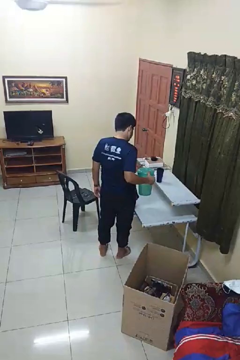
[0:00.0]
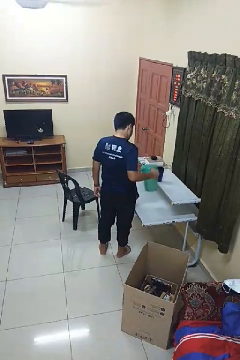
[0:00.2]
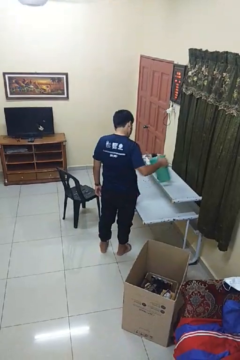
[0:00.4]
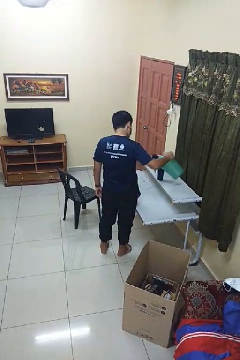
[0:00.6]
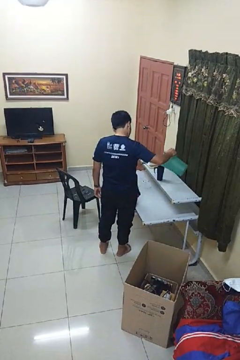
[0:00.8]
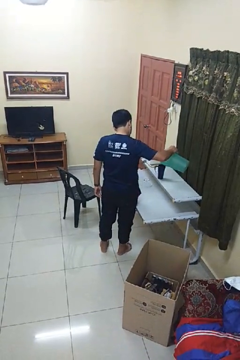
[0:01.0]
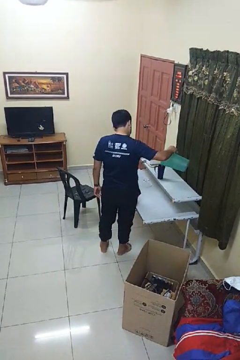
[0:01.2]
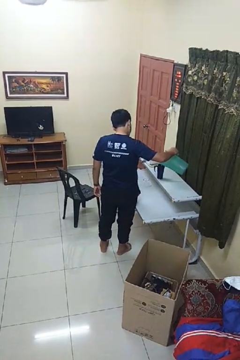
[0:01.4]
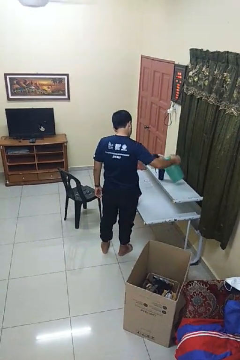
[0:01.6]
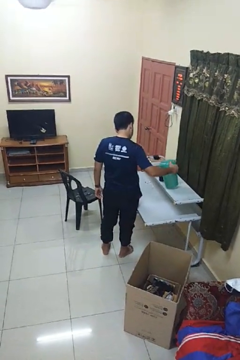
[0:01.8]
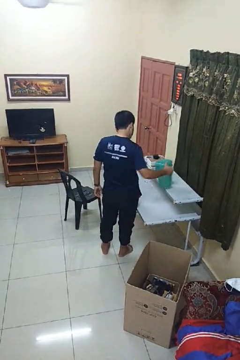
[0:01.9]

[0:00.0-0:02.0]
person pours coffee into mug

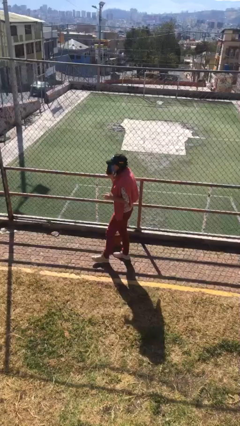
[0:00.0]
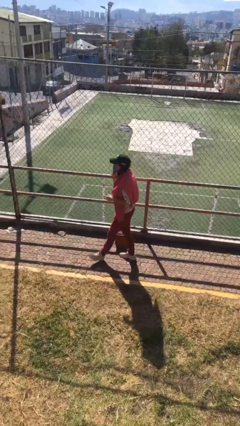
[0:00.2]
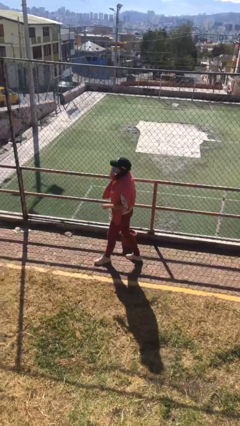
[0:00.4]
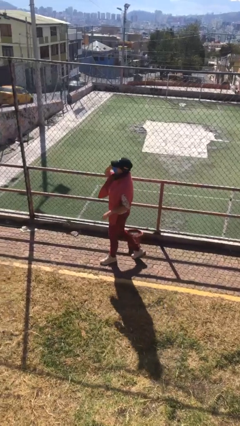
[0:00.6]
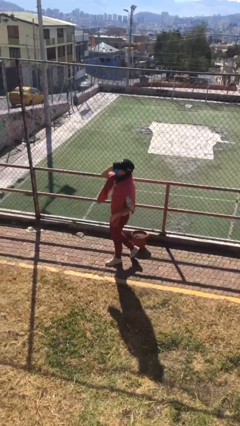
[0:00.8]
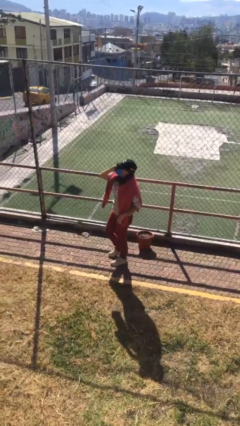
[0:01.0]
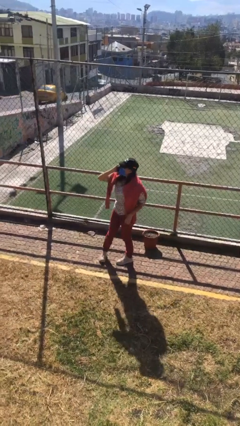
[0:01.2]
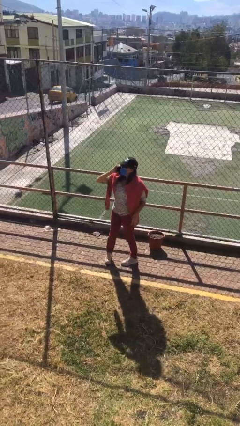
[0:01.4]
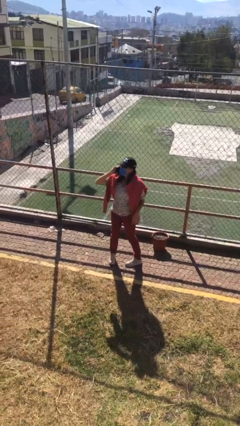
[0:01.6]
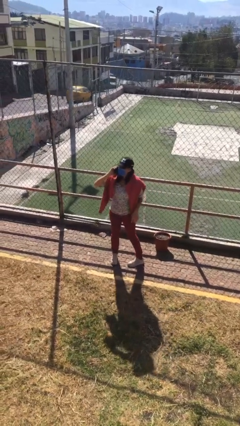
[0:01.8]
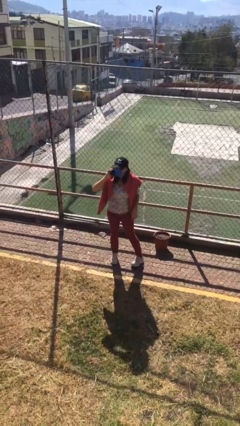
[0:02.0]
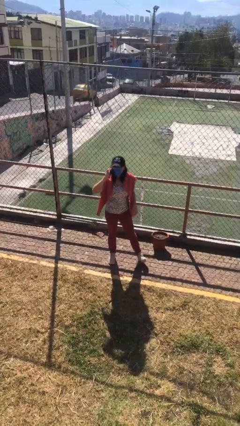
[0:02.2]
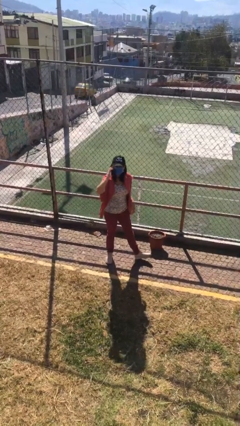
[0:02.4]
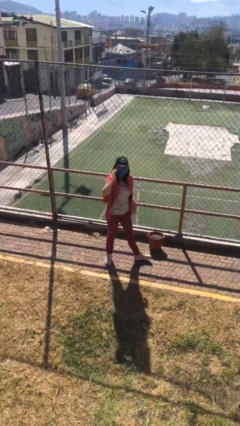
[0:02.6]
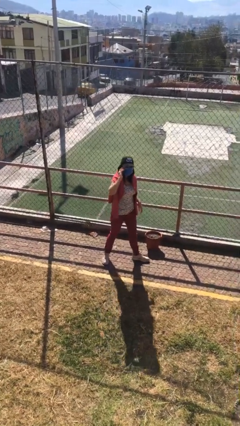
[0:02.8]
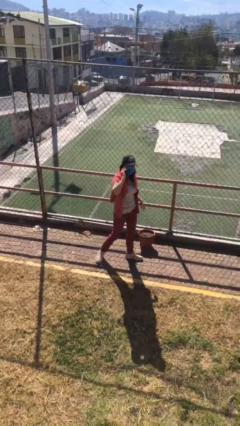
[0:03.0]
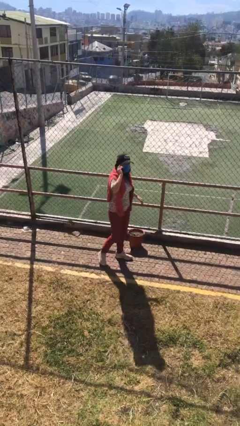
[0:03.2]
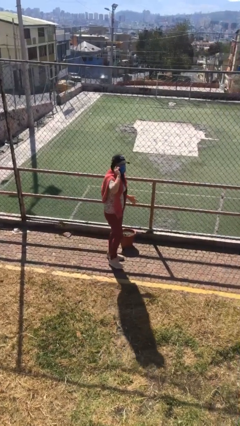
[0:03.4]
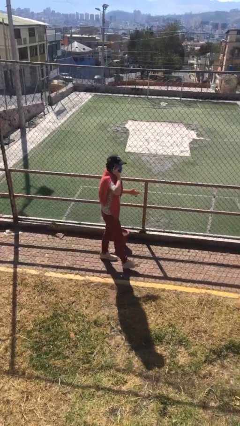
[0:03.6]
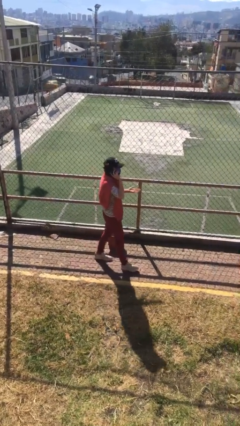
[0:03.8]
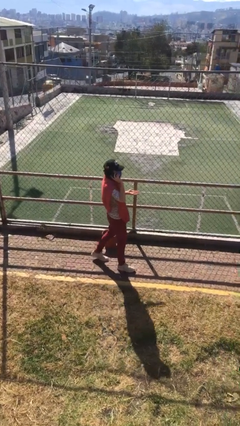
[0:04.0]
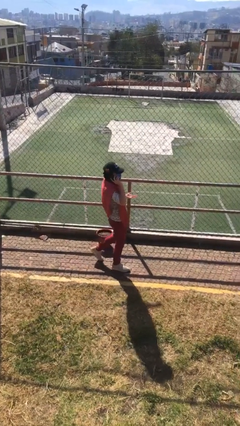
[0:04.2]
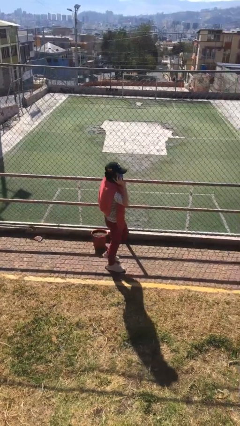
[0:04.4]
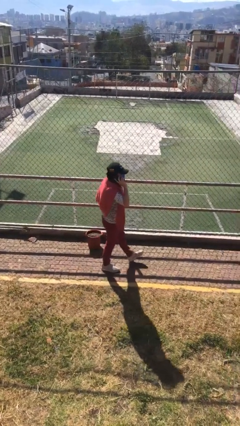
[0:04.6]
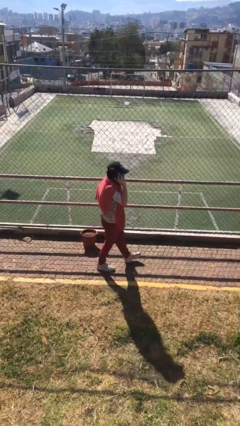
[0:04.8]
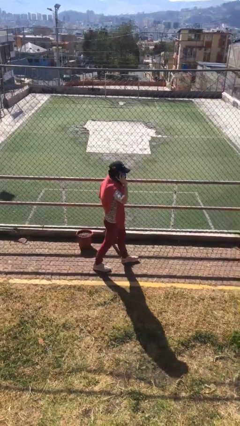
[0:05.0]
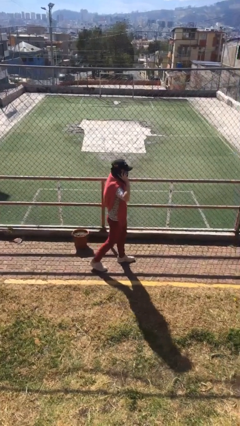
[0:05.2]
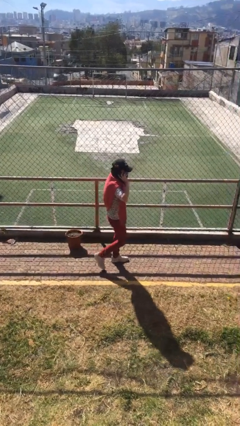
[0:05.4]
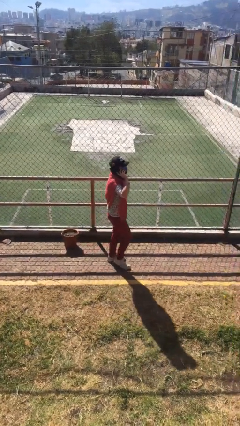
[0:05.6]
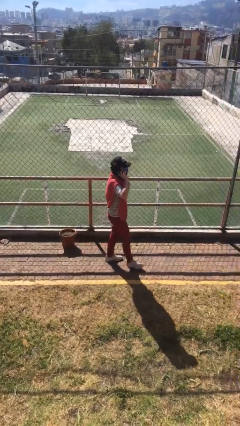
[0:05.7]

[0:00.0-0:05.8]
person talks on phone

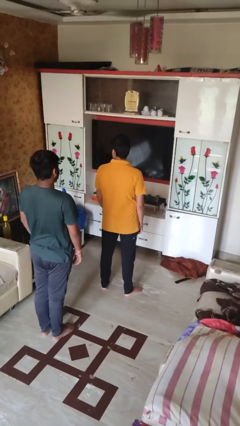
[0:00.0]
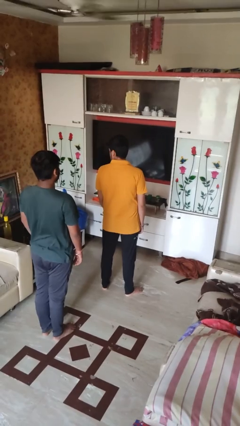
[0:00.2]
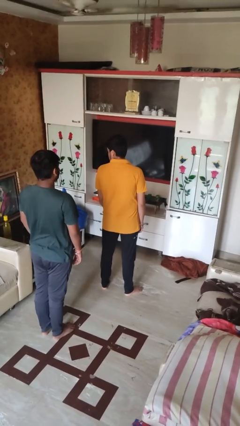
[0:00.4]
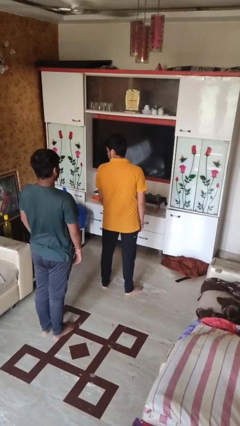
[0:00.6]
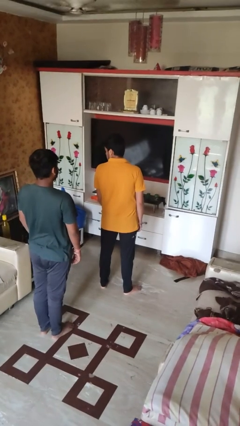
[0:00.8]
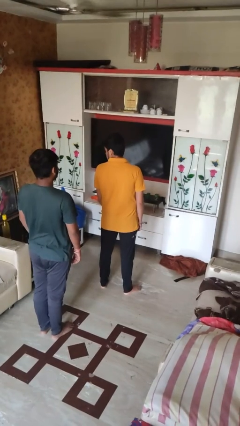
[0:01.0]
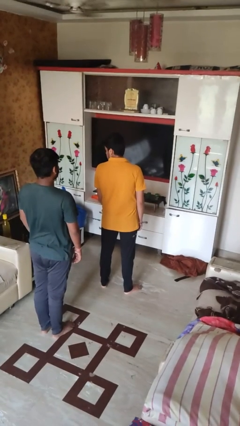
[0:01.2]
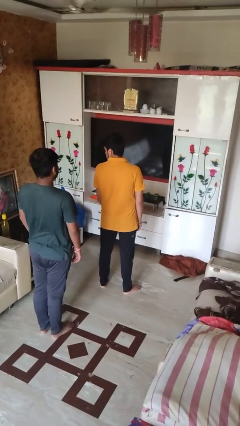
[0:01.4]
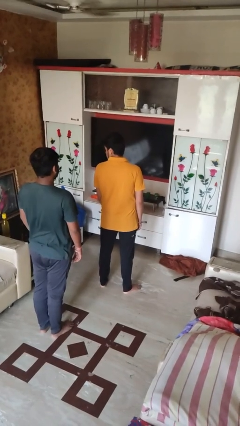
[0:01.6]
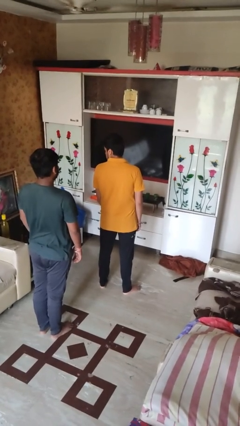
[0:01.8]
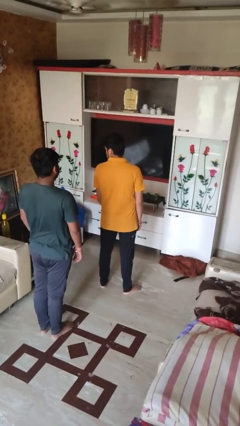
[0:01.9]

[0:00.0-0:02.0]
person looks over shoulder

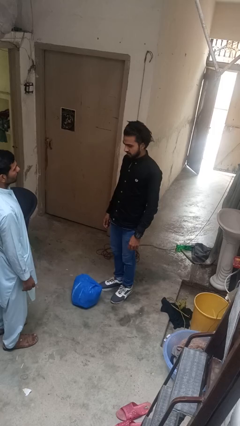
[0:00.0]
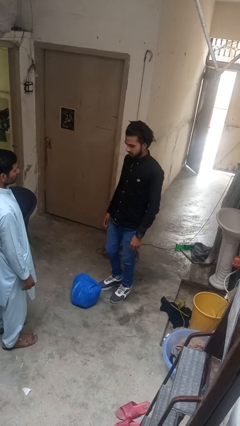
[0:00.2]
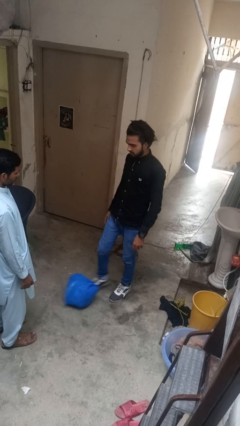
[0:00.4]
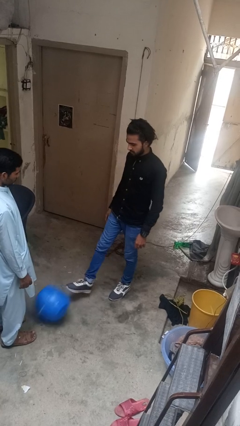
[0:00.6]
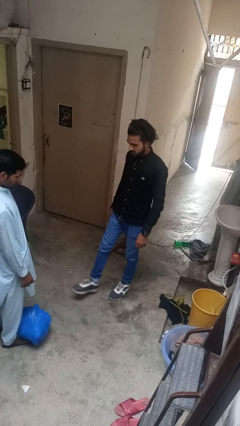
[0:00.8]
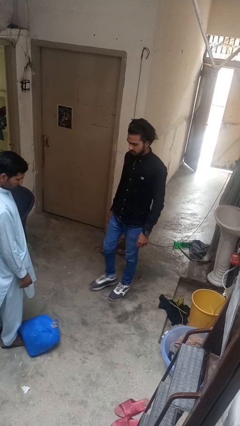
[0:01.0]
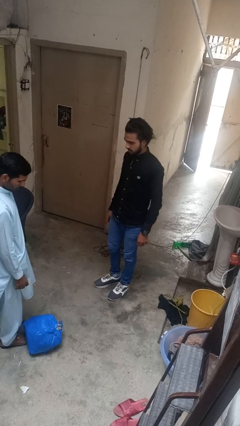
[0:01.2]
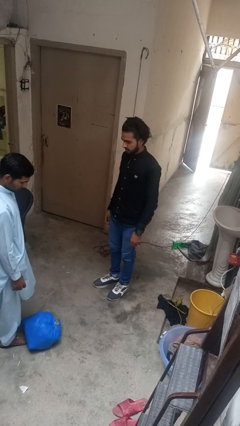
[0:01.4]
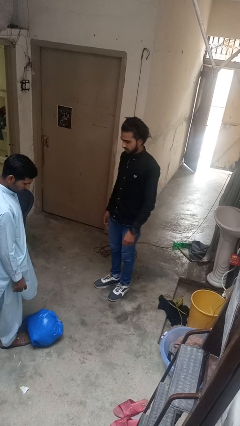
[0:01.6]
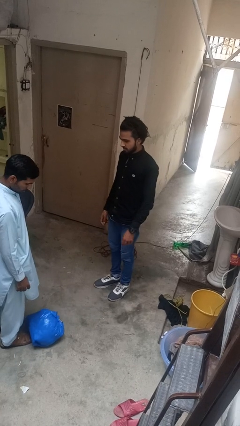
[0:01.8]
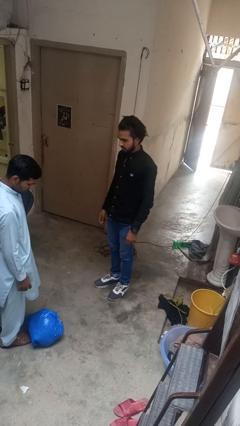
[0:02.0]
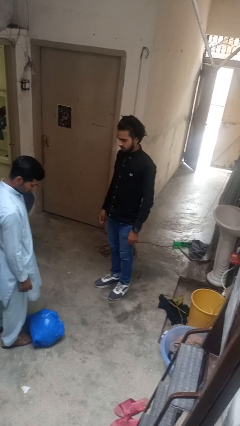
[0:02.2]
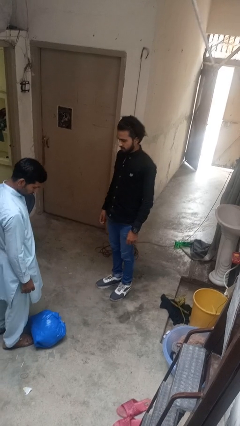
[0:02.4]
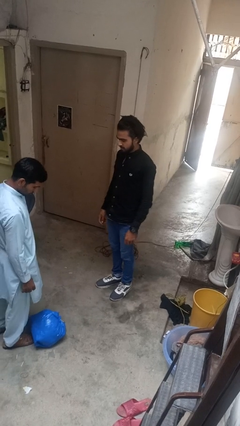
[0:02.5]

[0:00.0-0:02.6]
person kicks object to person

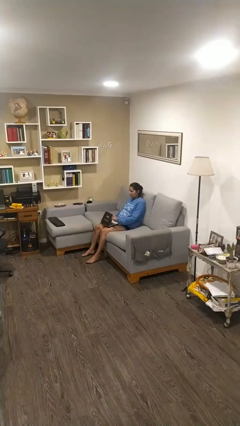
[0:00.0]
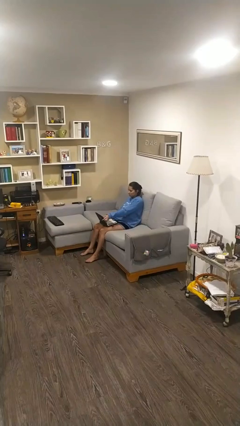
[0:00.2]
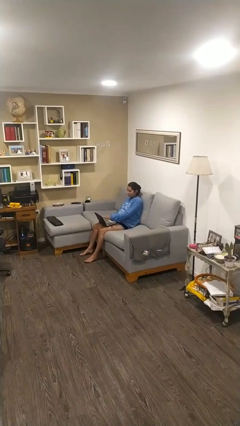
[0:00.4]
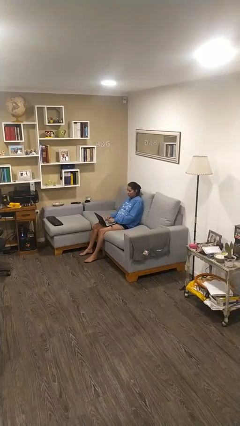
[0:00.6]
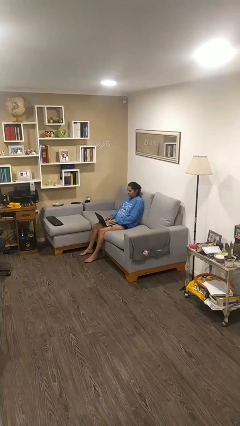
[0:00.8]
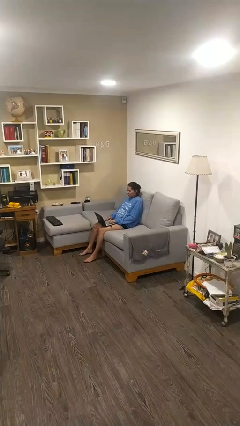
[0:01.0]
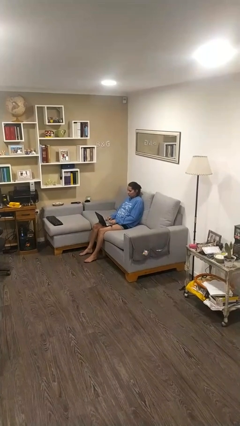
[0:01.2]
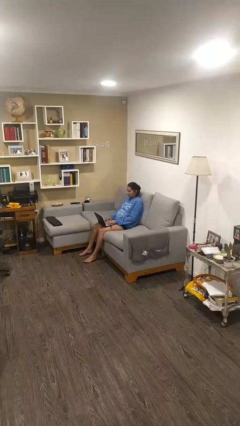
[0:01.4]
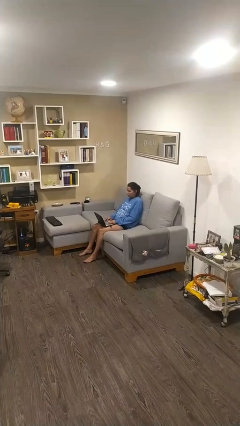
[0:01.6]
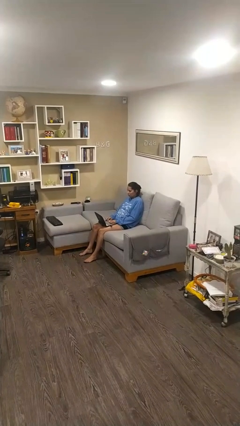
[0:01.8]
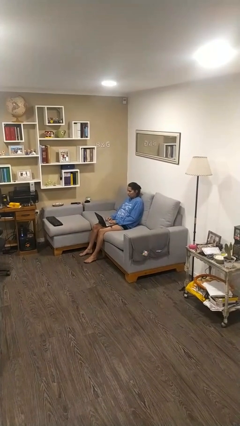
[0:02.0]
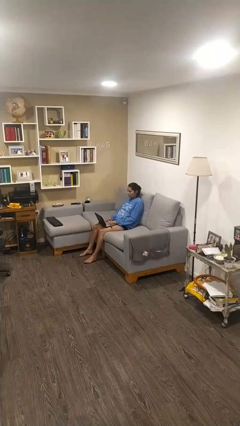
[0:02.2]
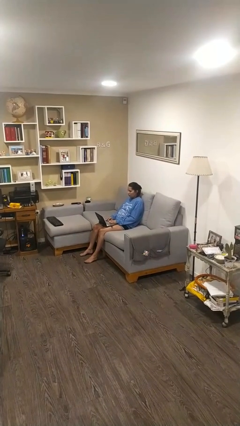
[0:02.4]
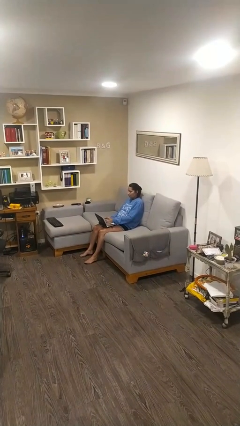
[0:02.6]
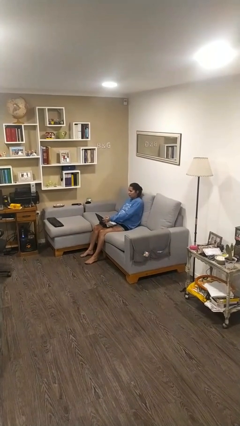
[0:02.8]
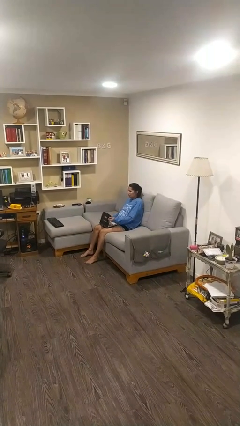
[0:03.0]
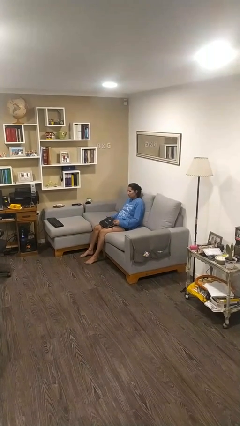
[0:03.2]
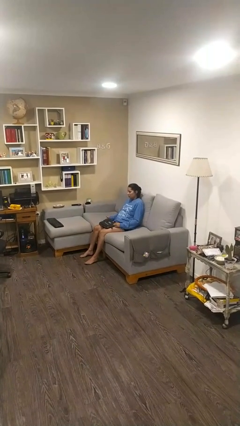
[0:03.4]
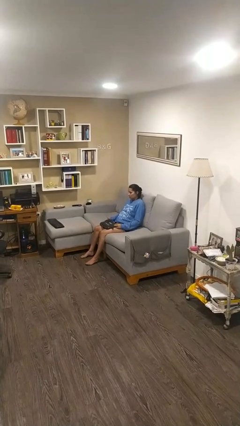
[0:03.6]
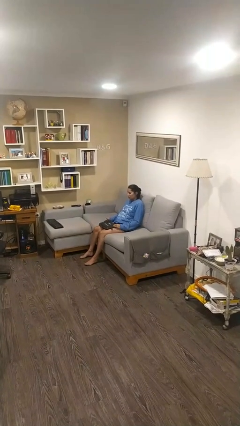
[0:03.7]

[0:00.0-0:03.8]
person interacts with laptop

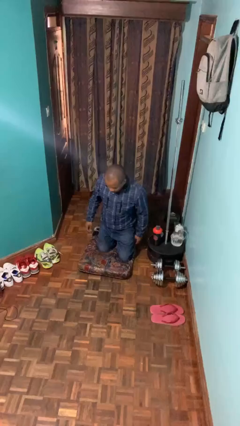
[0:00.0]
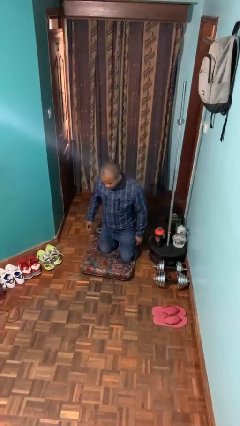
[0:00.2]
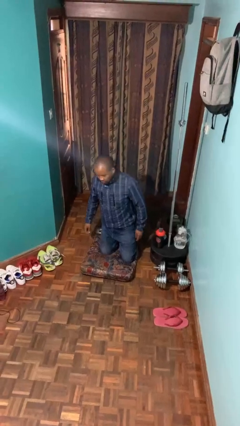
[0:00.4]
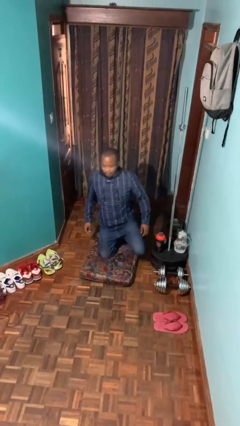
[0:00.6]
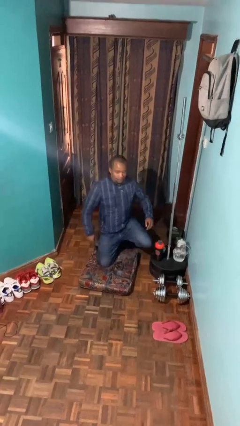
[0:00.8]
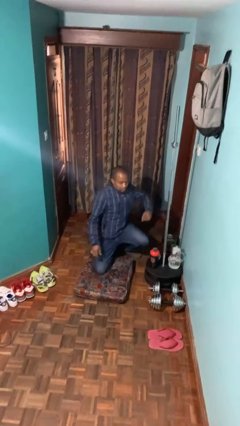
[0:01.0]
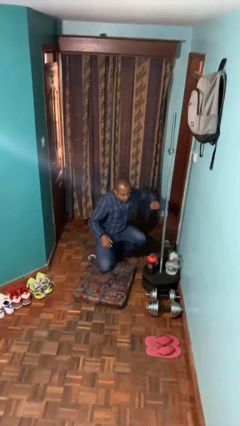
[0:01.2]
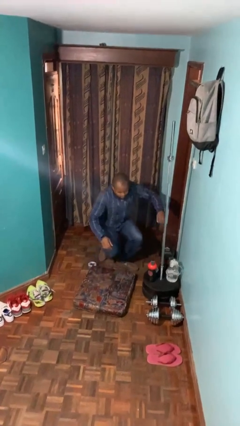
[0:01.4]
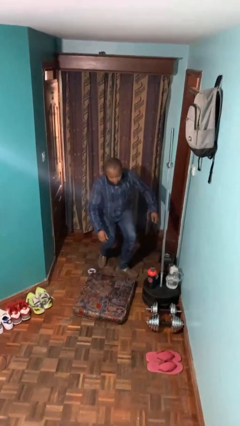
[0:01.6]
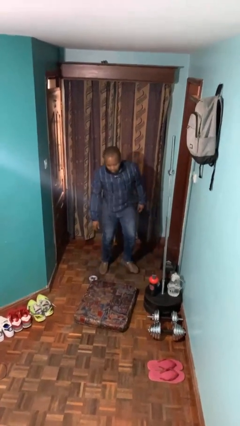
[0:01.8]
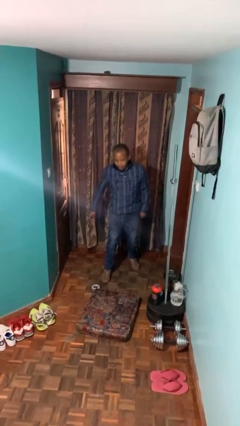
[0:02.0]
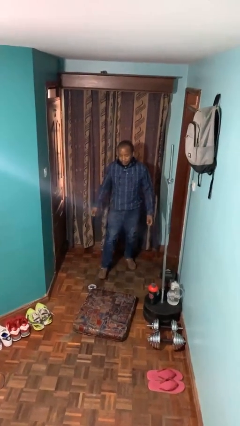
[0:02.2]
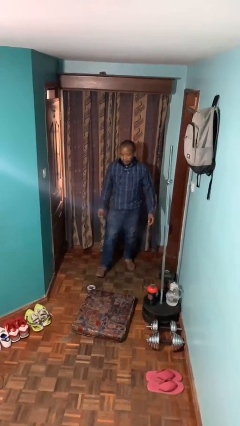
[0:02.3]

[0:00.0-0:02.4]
person stands up from floor
